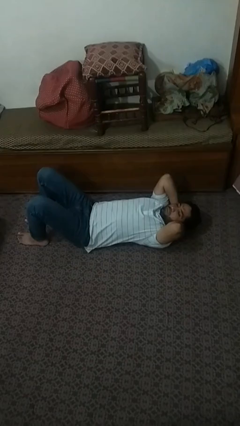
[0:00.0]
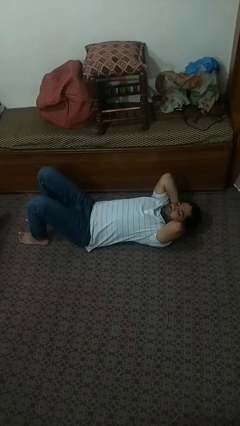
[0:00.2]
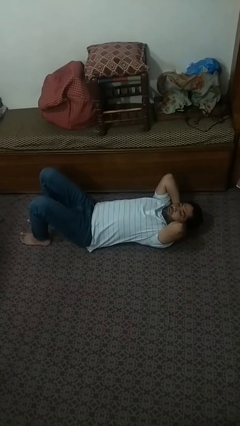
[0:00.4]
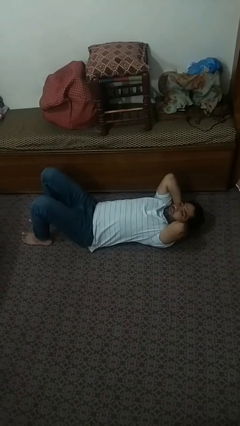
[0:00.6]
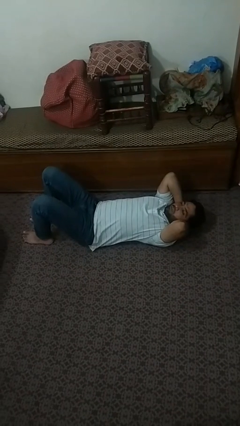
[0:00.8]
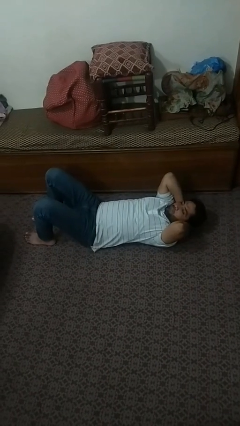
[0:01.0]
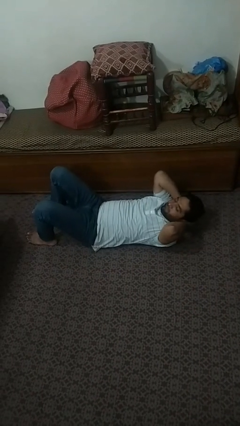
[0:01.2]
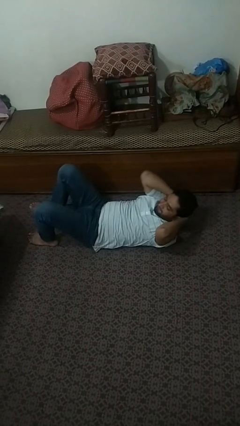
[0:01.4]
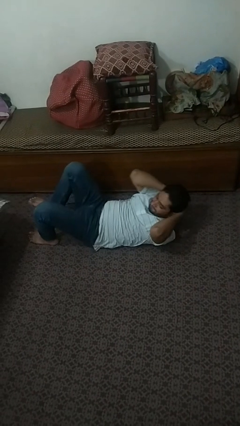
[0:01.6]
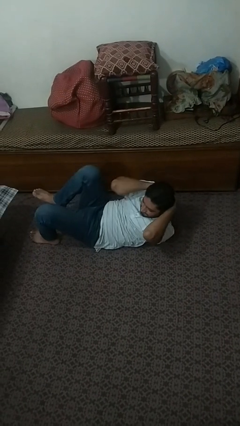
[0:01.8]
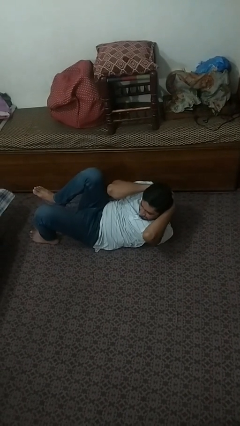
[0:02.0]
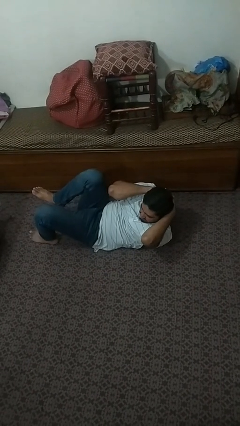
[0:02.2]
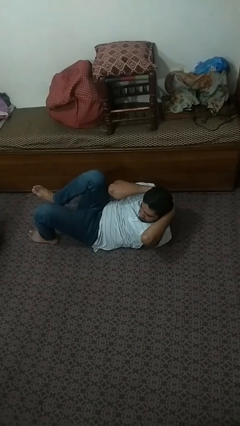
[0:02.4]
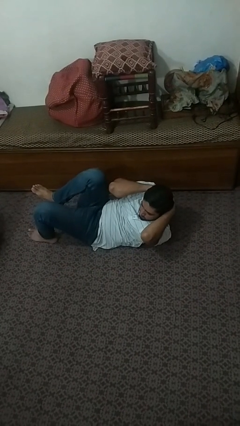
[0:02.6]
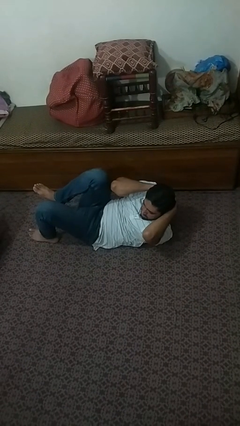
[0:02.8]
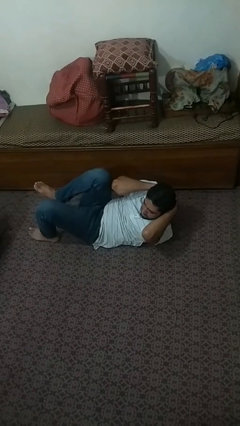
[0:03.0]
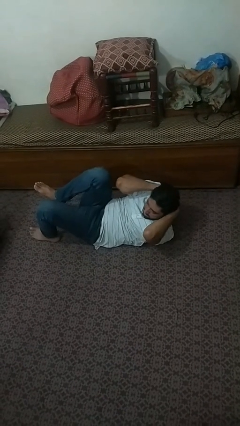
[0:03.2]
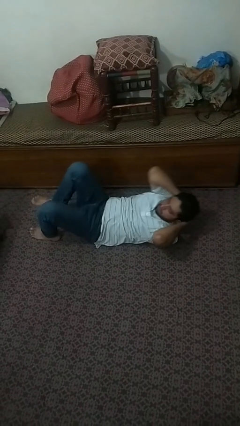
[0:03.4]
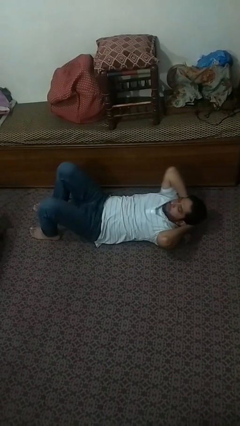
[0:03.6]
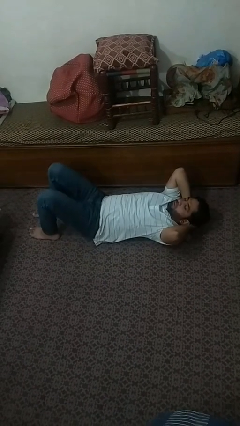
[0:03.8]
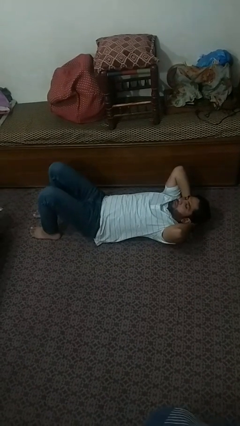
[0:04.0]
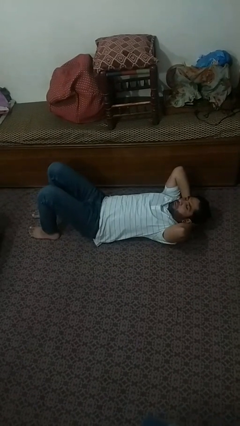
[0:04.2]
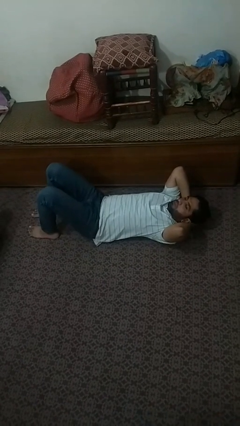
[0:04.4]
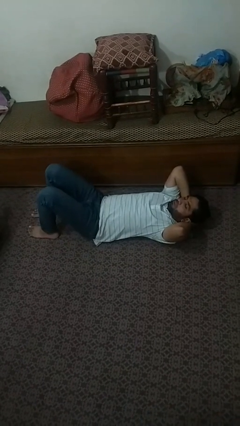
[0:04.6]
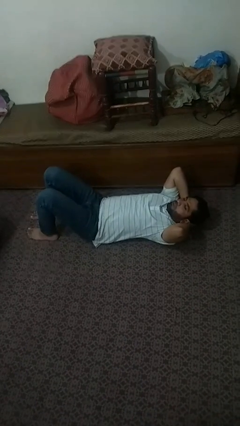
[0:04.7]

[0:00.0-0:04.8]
person exercises with situp

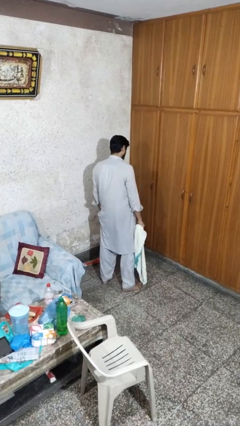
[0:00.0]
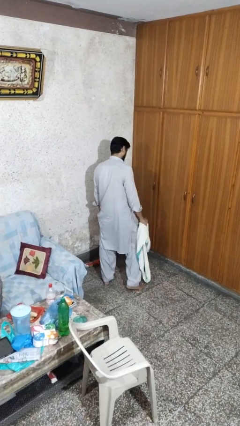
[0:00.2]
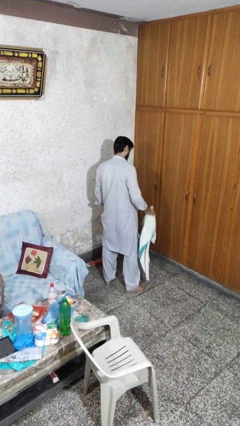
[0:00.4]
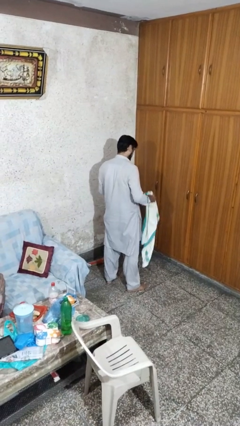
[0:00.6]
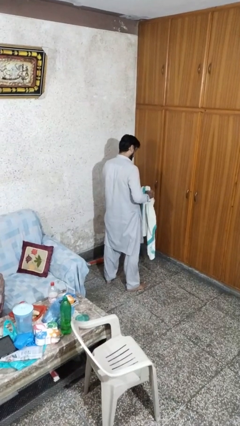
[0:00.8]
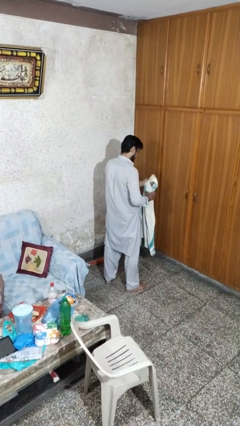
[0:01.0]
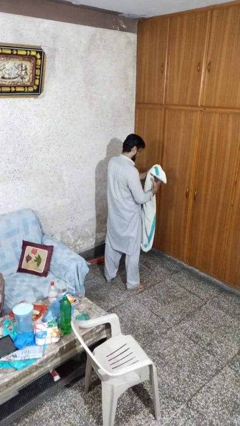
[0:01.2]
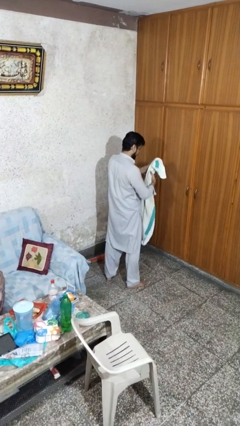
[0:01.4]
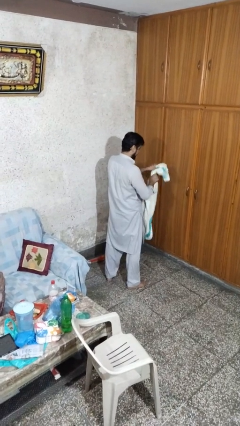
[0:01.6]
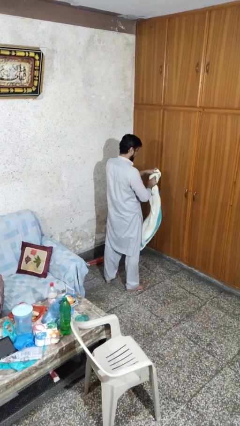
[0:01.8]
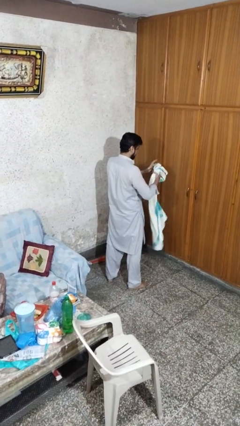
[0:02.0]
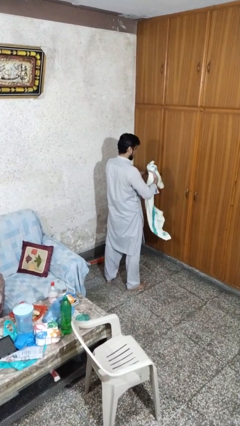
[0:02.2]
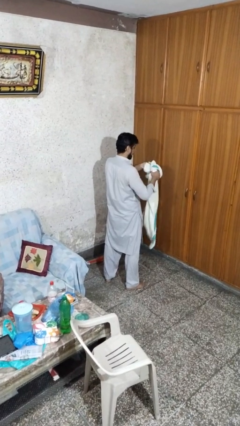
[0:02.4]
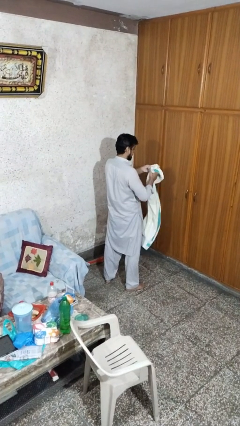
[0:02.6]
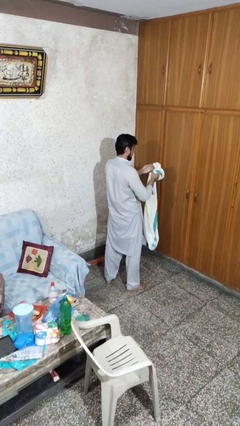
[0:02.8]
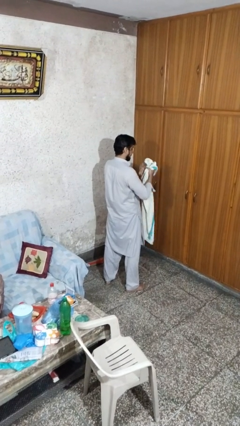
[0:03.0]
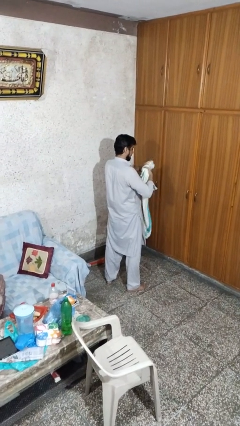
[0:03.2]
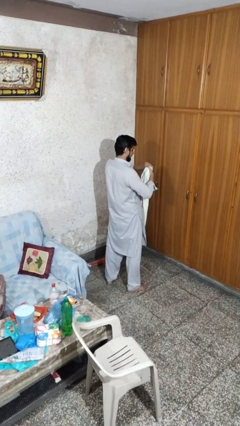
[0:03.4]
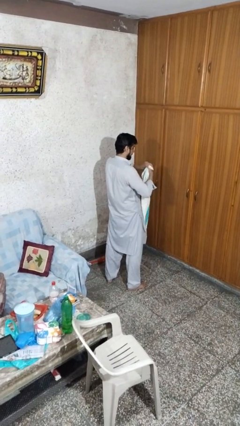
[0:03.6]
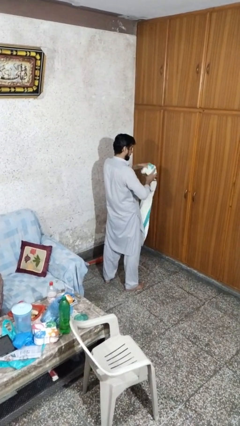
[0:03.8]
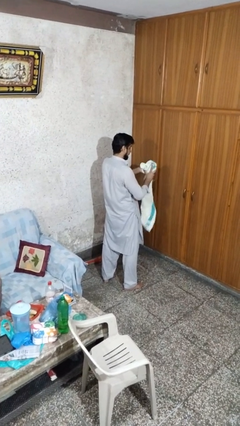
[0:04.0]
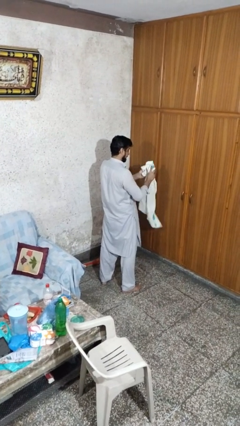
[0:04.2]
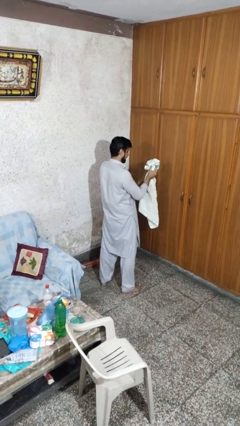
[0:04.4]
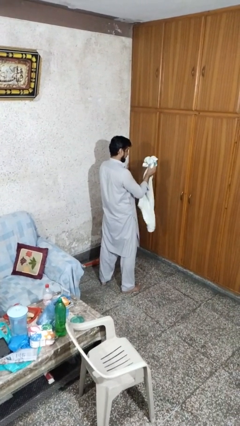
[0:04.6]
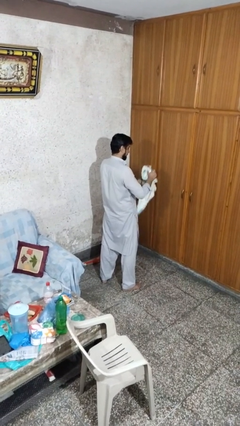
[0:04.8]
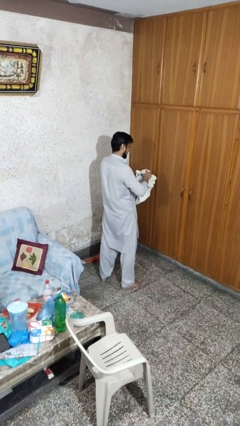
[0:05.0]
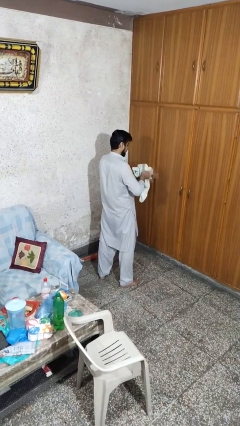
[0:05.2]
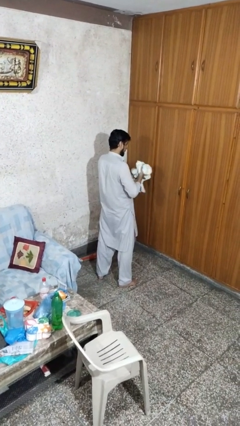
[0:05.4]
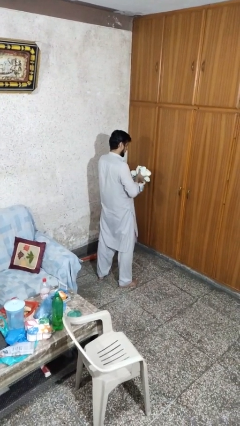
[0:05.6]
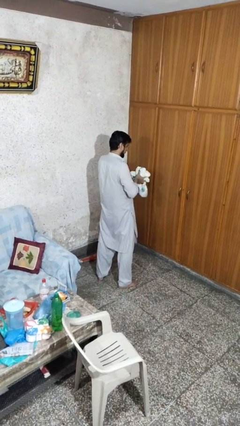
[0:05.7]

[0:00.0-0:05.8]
person squeezes object

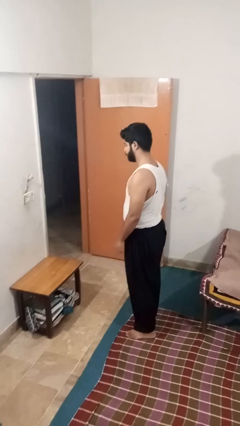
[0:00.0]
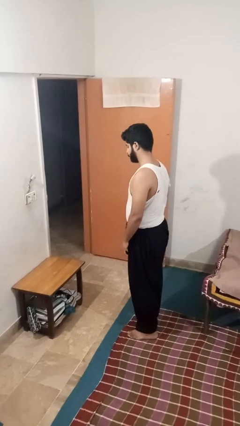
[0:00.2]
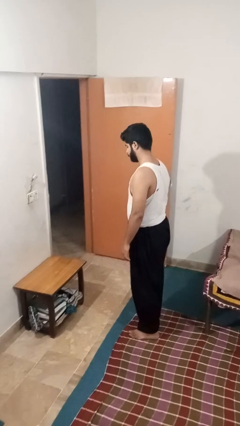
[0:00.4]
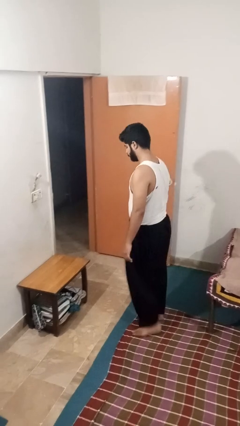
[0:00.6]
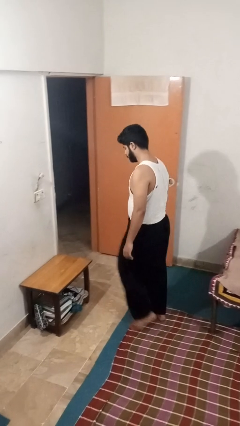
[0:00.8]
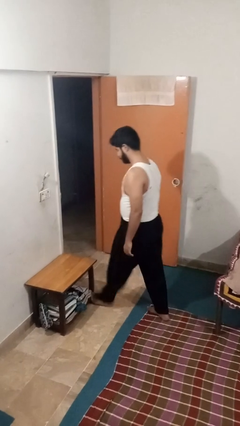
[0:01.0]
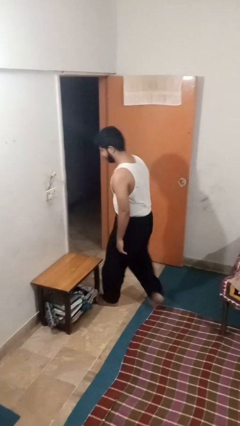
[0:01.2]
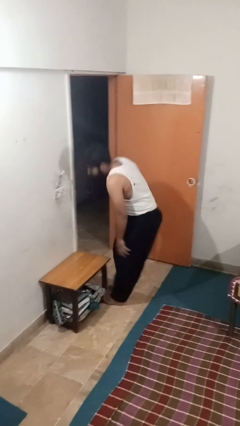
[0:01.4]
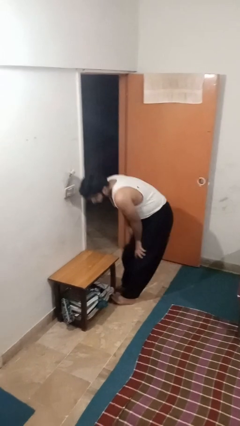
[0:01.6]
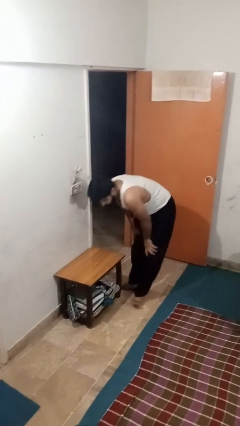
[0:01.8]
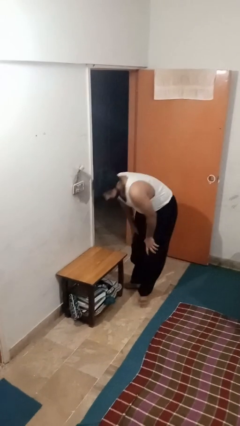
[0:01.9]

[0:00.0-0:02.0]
person bumps into table

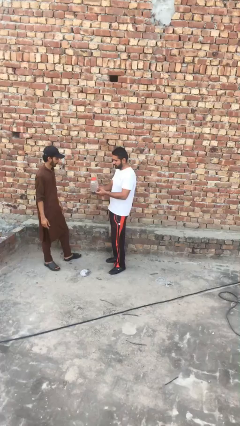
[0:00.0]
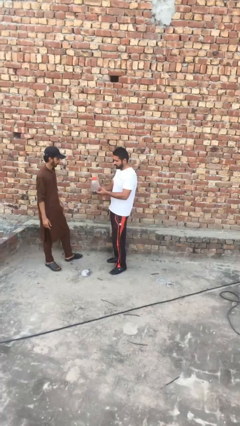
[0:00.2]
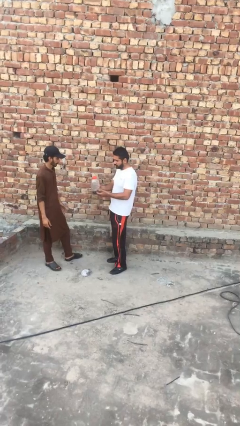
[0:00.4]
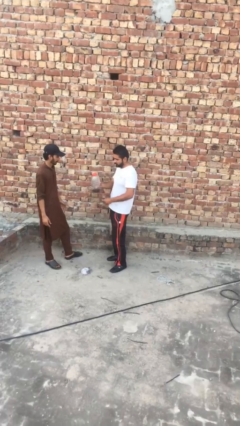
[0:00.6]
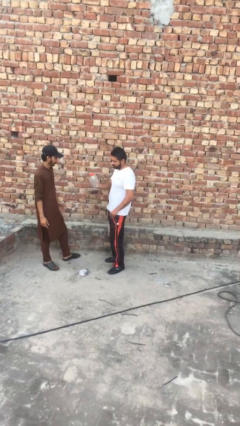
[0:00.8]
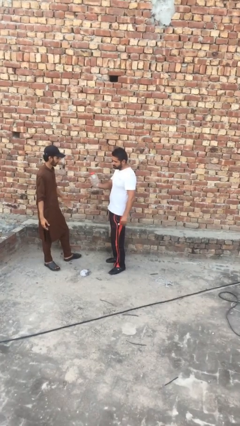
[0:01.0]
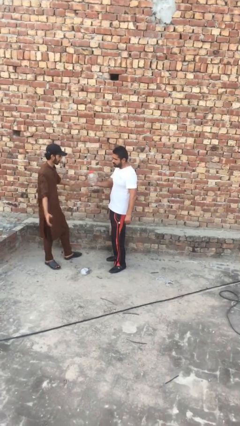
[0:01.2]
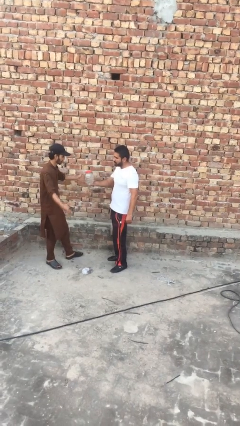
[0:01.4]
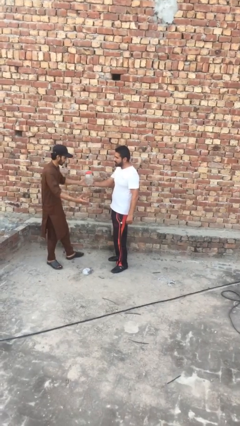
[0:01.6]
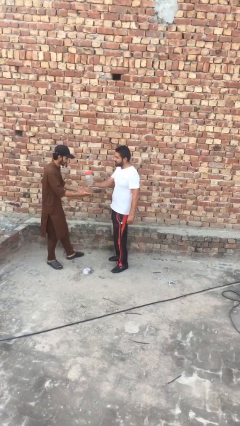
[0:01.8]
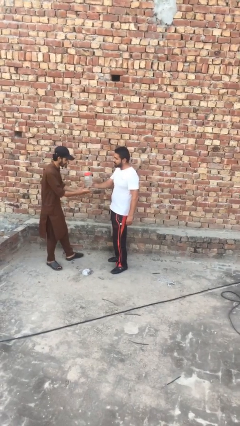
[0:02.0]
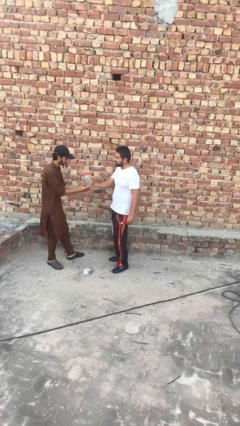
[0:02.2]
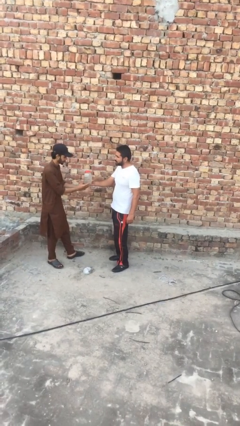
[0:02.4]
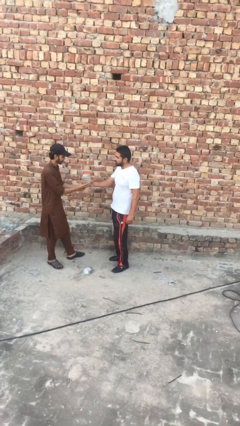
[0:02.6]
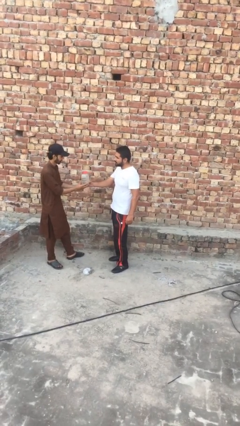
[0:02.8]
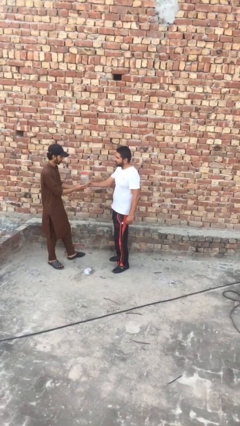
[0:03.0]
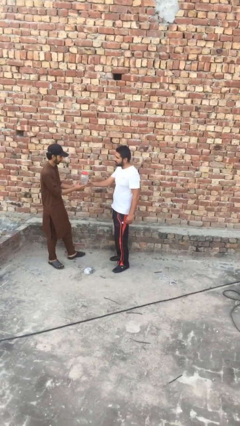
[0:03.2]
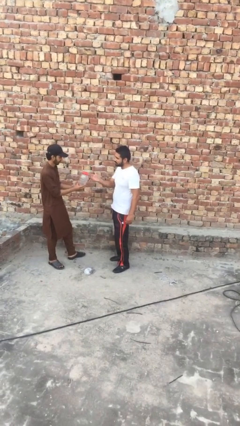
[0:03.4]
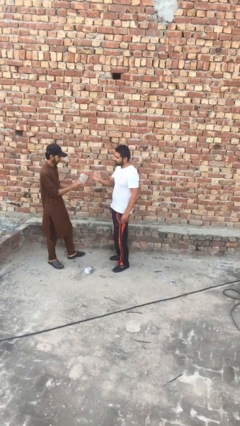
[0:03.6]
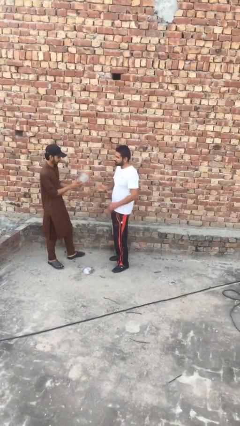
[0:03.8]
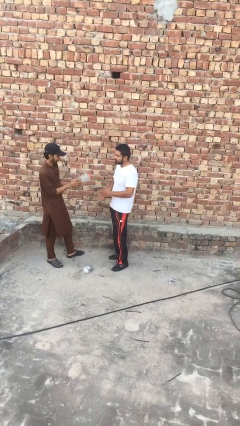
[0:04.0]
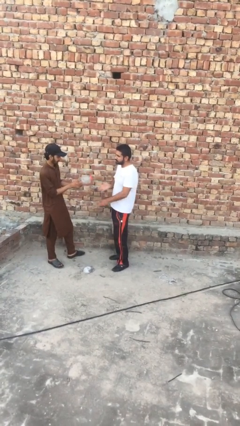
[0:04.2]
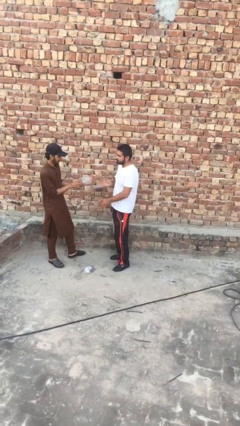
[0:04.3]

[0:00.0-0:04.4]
person transfers object to person

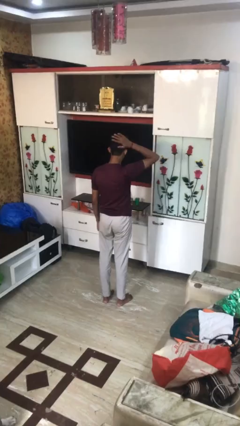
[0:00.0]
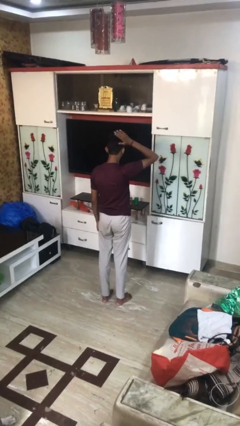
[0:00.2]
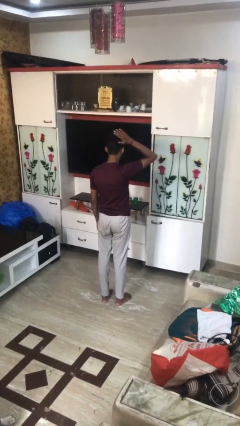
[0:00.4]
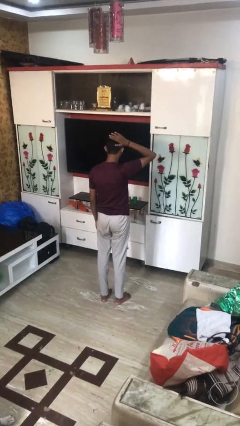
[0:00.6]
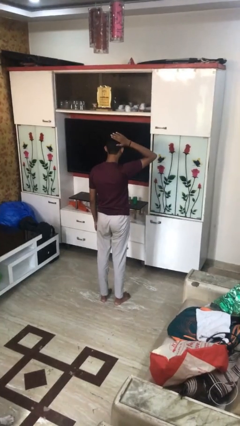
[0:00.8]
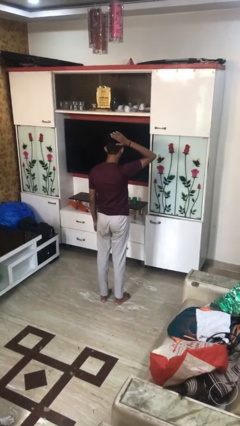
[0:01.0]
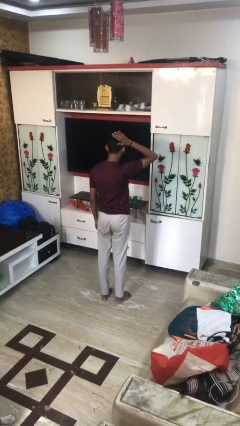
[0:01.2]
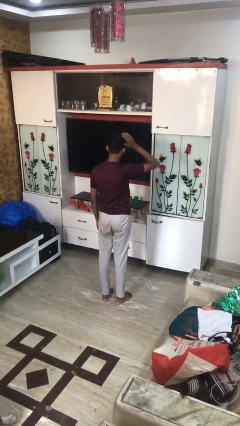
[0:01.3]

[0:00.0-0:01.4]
person pats head
